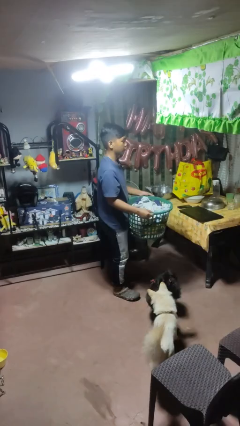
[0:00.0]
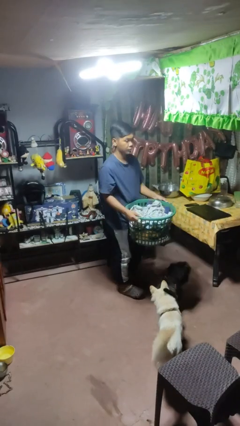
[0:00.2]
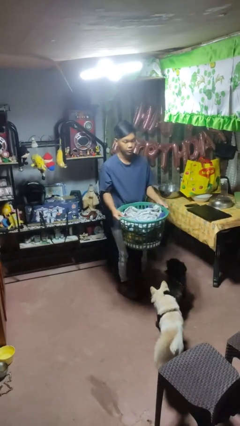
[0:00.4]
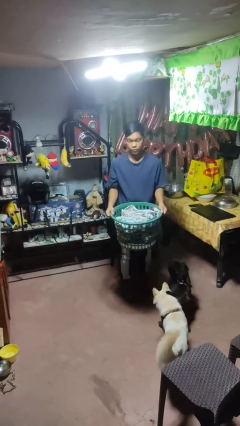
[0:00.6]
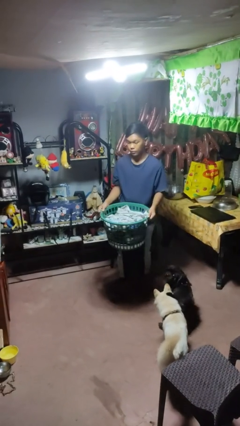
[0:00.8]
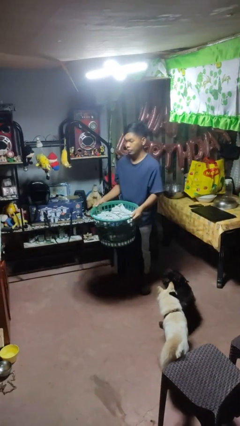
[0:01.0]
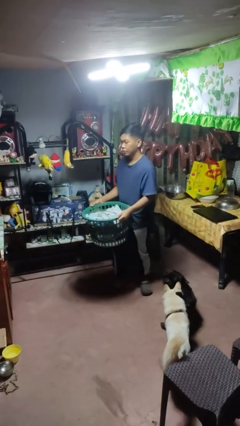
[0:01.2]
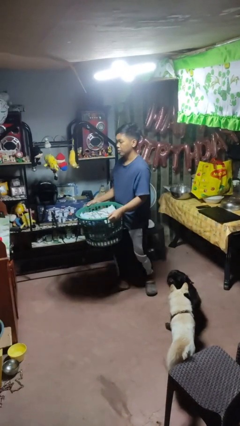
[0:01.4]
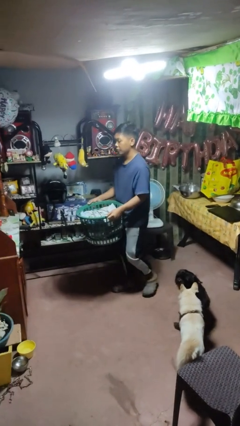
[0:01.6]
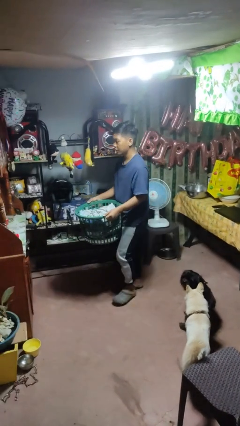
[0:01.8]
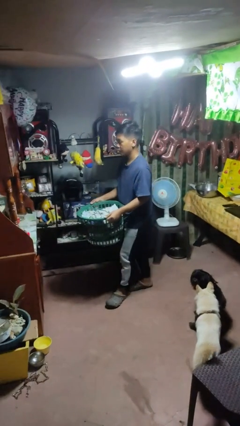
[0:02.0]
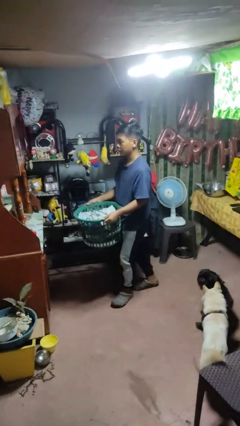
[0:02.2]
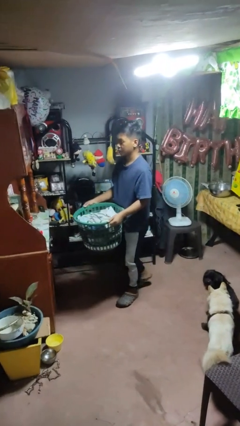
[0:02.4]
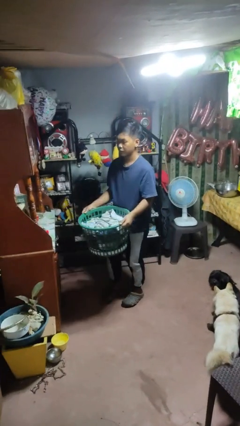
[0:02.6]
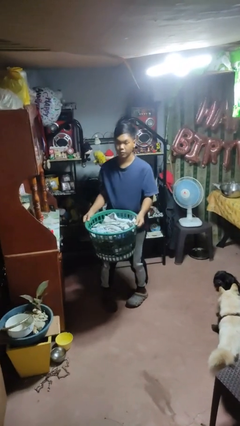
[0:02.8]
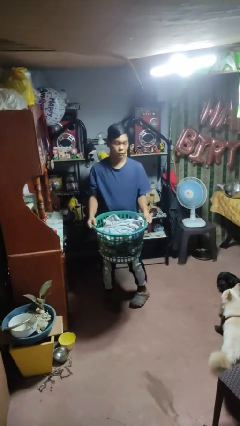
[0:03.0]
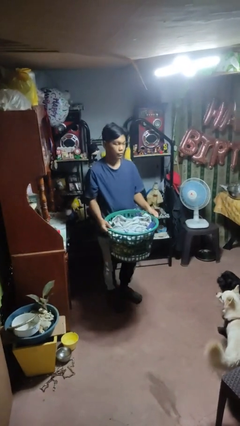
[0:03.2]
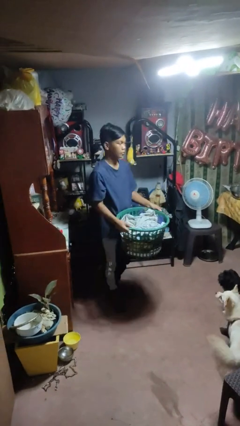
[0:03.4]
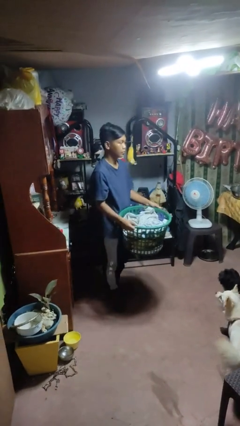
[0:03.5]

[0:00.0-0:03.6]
person carries laundry basket

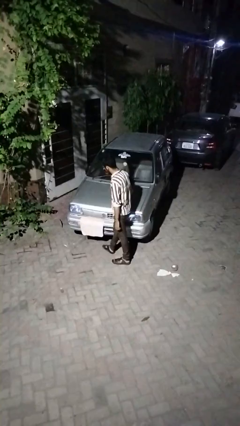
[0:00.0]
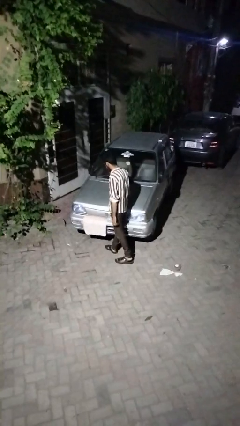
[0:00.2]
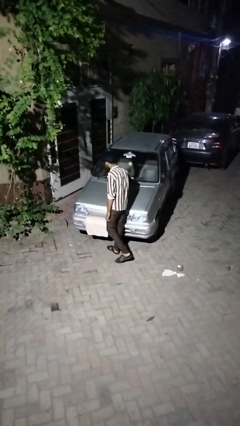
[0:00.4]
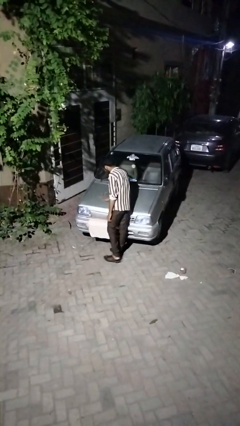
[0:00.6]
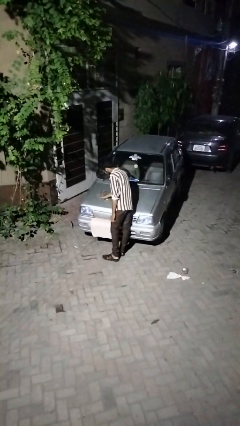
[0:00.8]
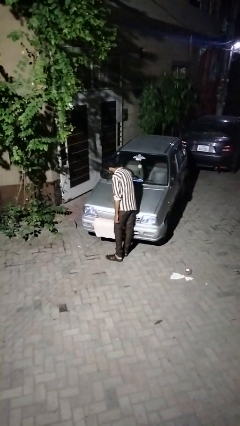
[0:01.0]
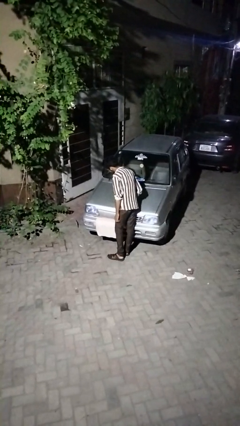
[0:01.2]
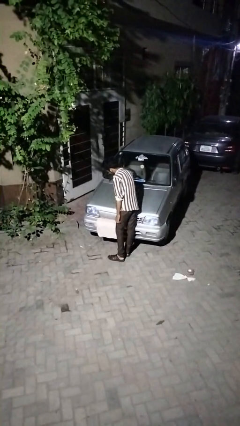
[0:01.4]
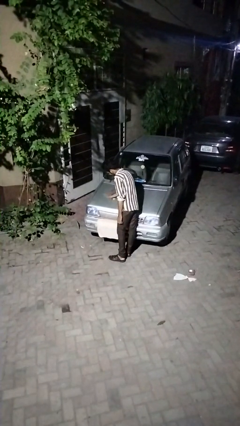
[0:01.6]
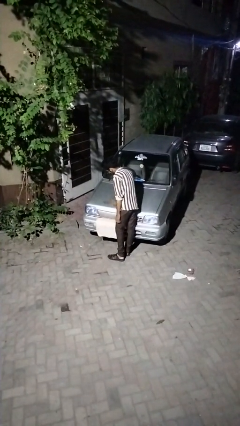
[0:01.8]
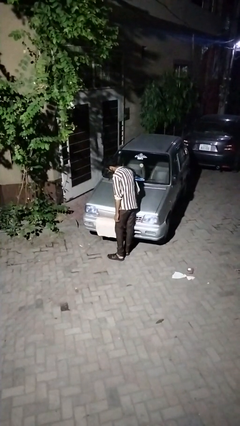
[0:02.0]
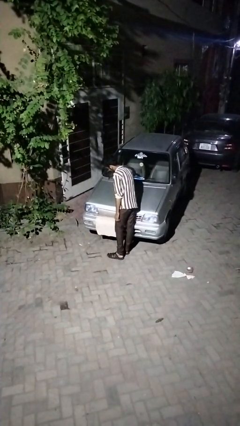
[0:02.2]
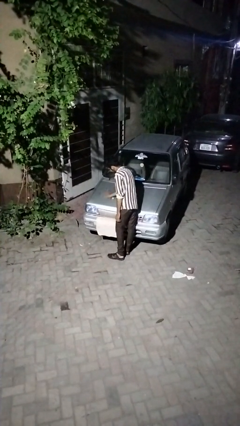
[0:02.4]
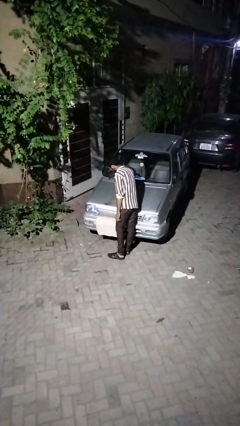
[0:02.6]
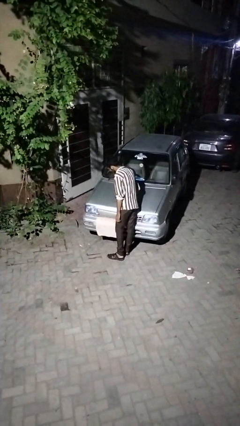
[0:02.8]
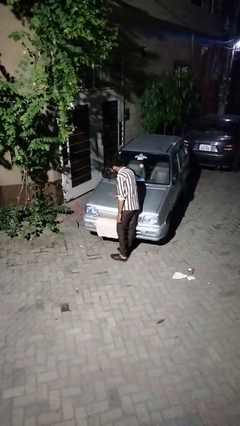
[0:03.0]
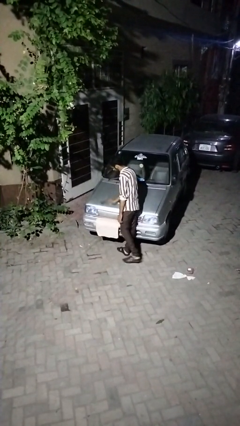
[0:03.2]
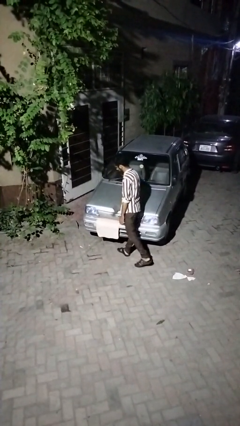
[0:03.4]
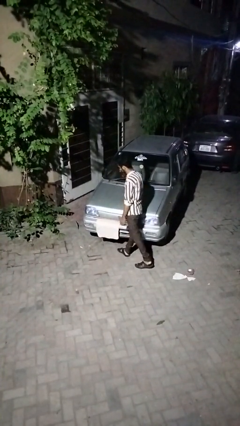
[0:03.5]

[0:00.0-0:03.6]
person polishes car with rag

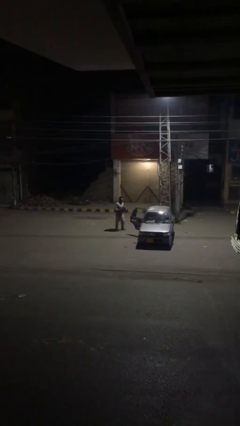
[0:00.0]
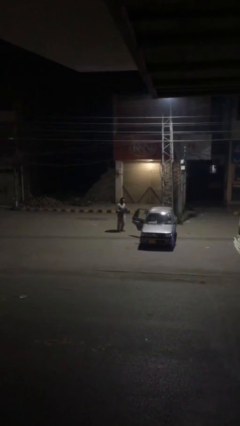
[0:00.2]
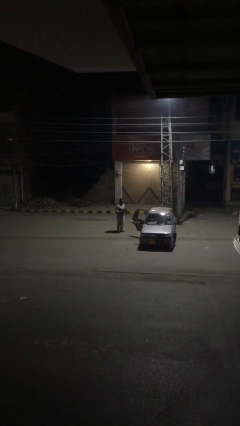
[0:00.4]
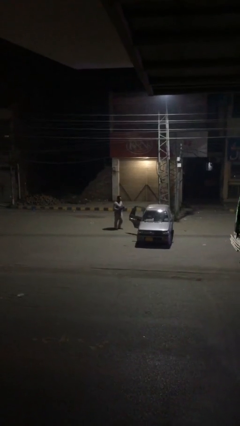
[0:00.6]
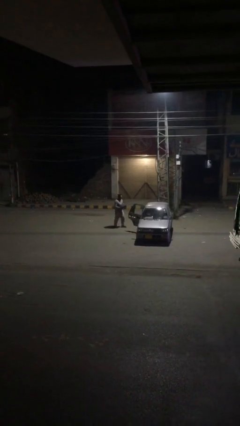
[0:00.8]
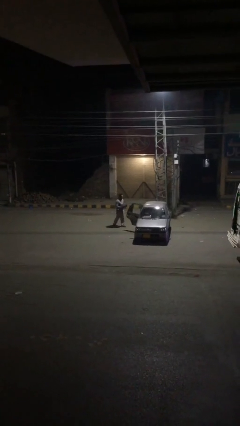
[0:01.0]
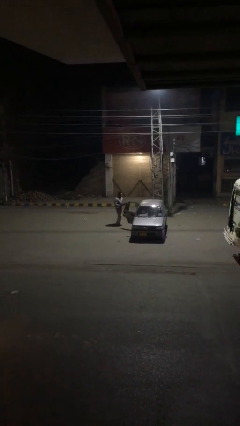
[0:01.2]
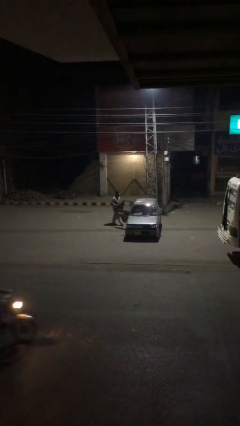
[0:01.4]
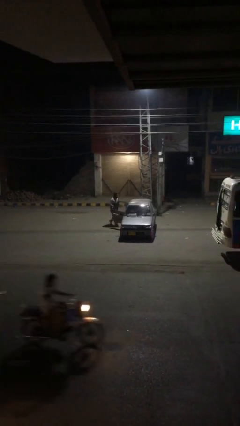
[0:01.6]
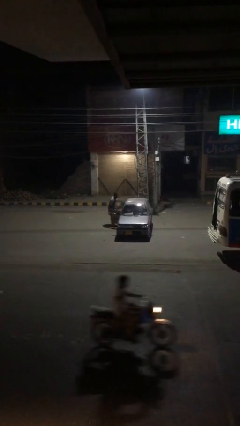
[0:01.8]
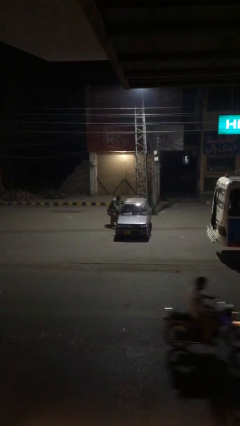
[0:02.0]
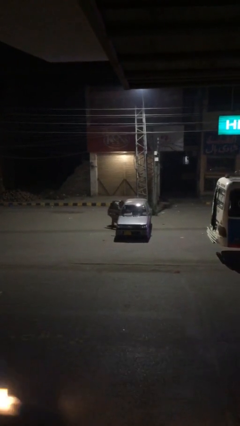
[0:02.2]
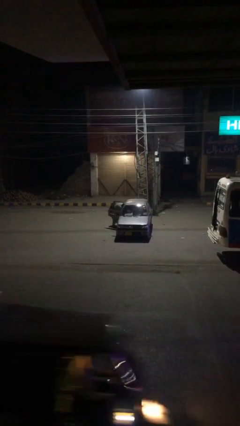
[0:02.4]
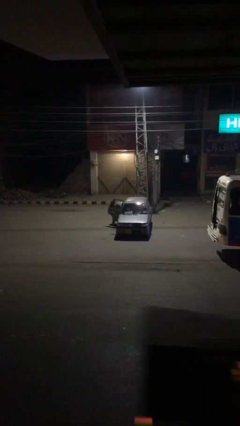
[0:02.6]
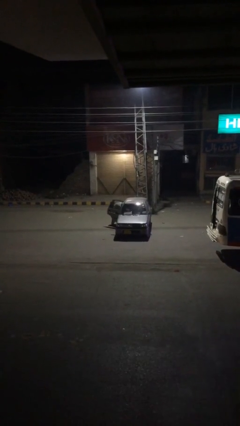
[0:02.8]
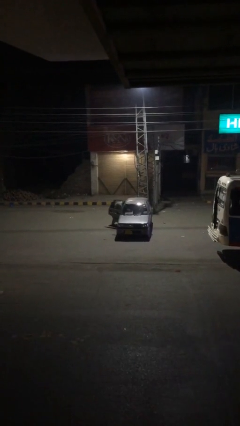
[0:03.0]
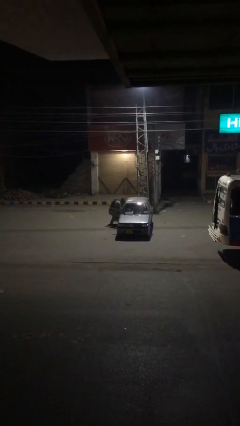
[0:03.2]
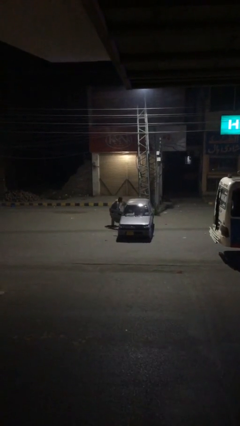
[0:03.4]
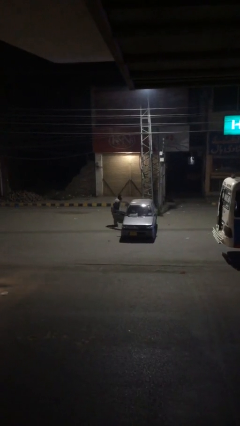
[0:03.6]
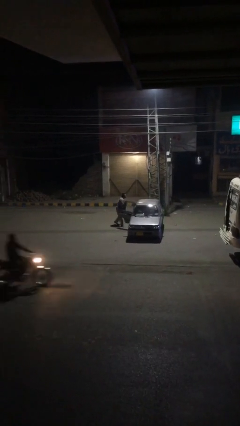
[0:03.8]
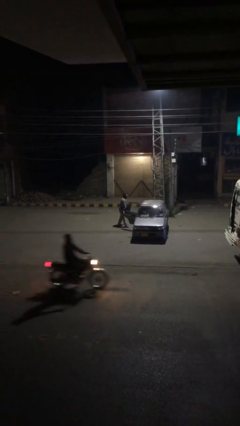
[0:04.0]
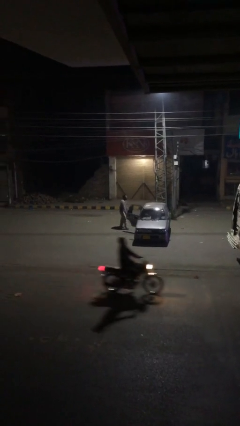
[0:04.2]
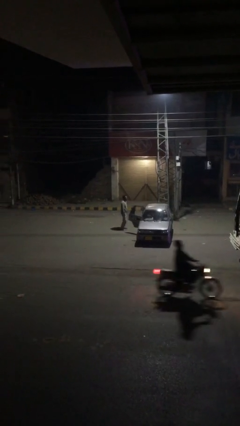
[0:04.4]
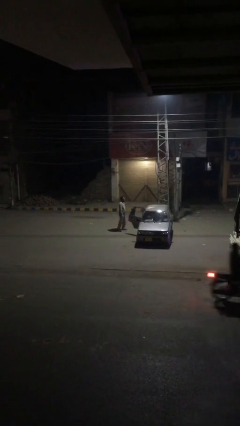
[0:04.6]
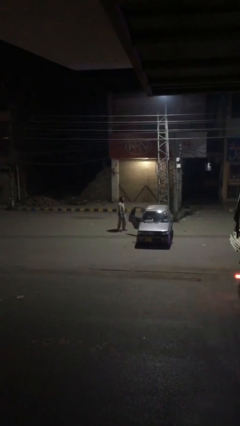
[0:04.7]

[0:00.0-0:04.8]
person loads car

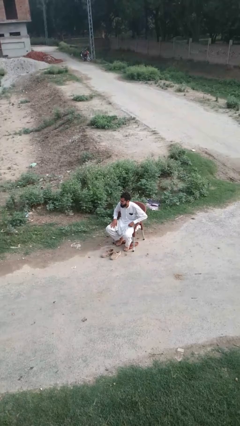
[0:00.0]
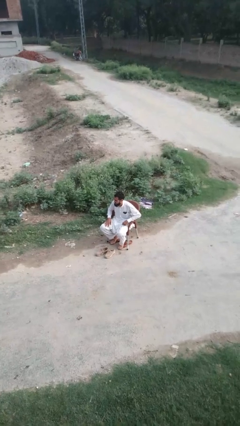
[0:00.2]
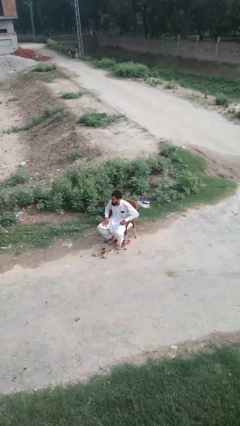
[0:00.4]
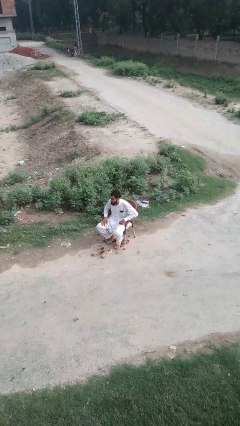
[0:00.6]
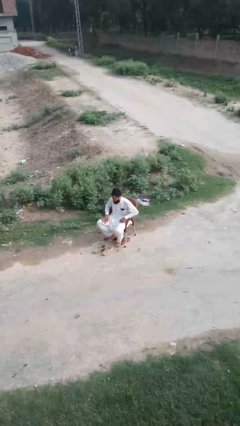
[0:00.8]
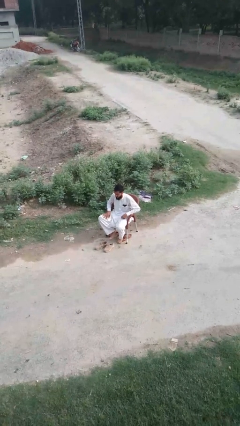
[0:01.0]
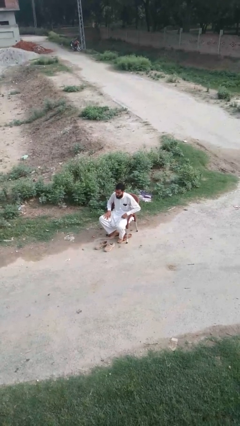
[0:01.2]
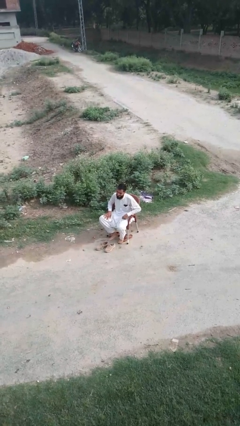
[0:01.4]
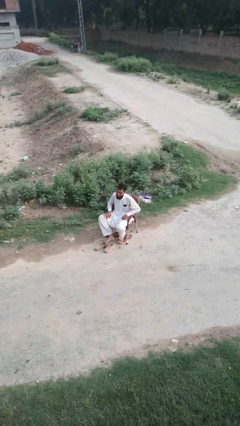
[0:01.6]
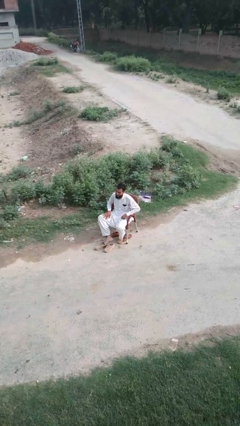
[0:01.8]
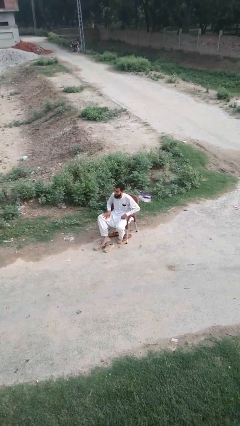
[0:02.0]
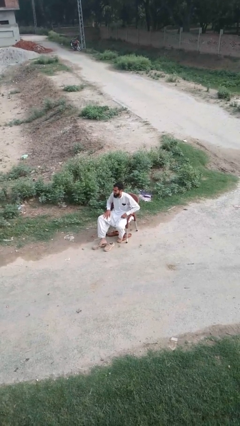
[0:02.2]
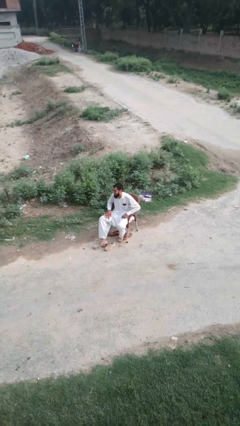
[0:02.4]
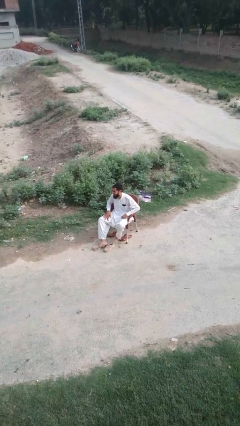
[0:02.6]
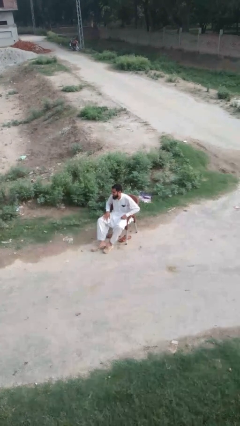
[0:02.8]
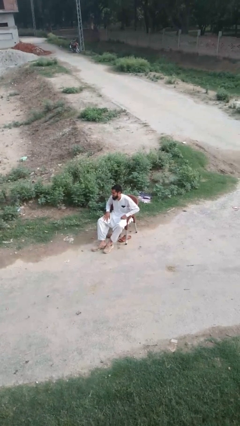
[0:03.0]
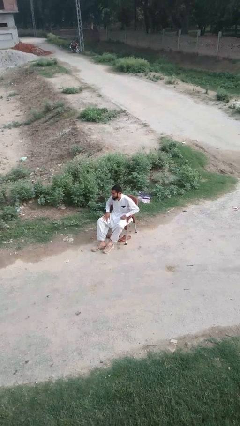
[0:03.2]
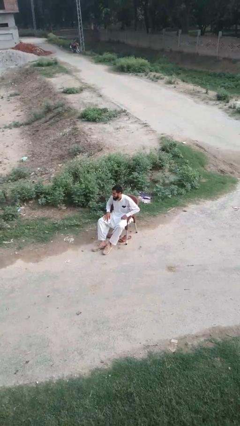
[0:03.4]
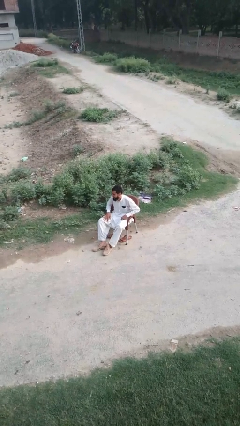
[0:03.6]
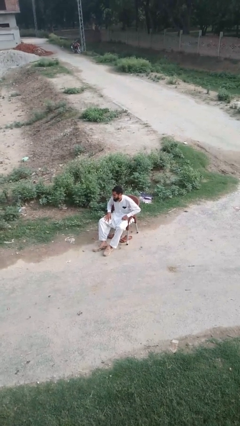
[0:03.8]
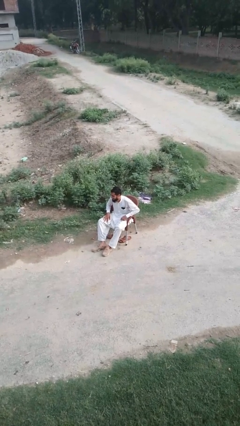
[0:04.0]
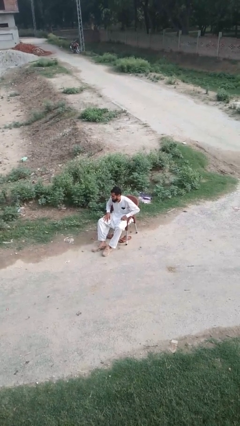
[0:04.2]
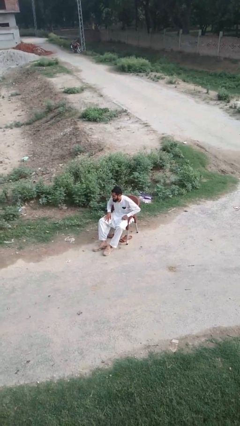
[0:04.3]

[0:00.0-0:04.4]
person puts on shoes

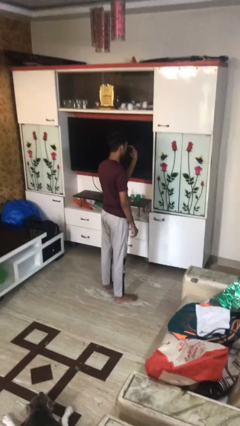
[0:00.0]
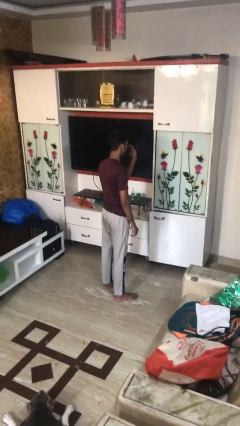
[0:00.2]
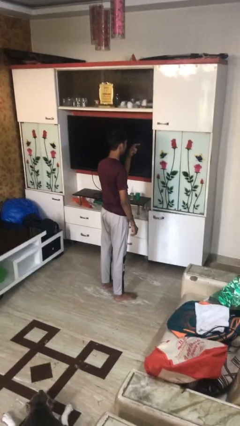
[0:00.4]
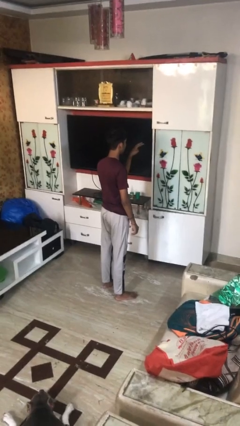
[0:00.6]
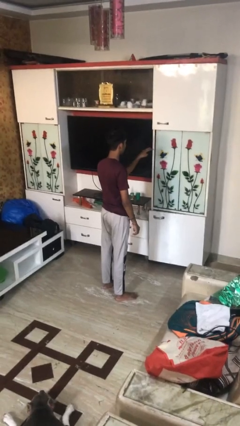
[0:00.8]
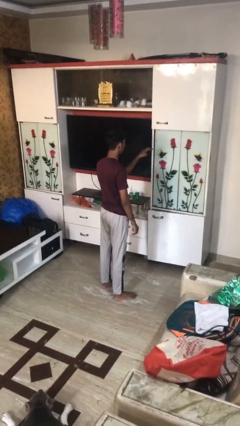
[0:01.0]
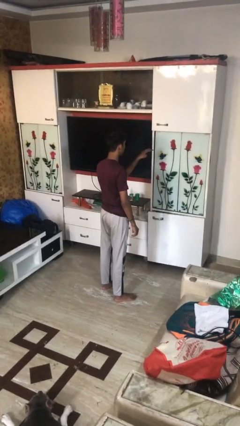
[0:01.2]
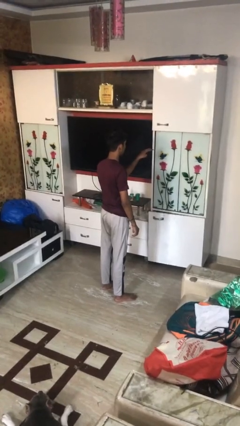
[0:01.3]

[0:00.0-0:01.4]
person gestures watch closely

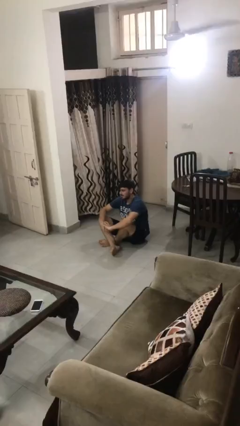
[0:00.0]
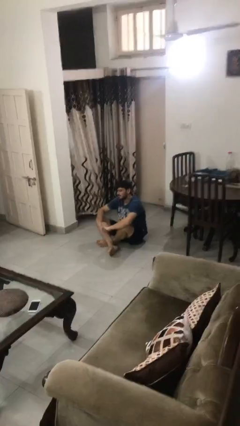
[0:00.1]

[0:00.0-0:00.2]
person stands up from floor
